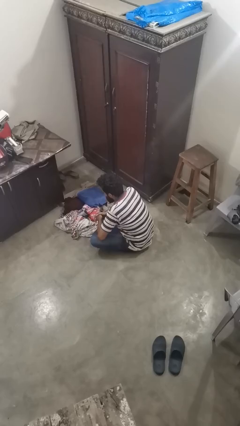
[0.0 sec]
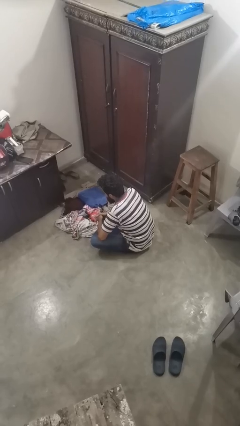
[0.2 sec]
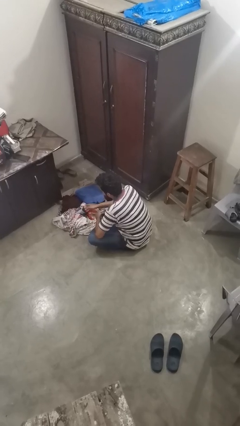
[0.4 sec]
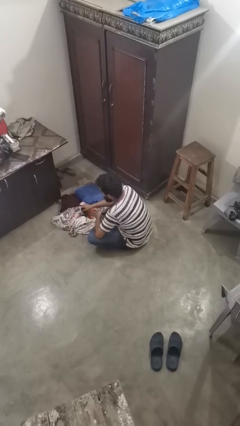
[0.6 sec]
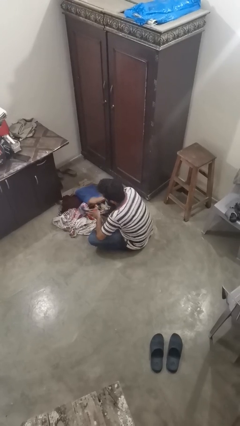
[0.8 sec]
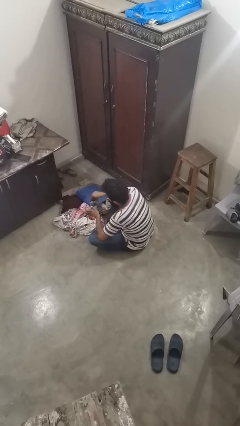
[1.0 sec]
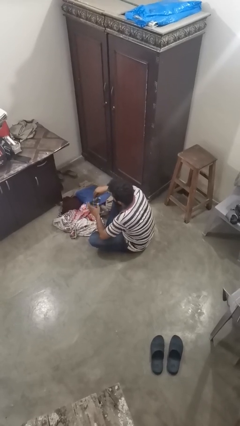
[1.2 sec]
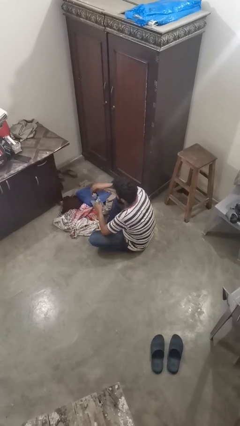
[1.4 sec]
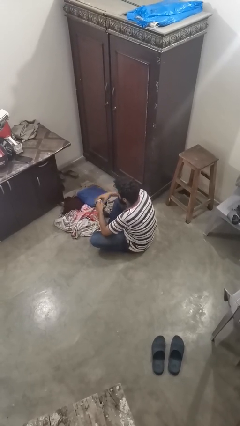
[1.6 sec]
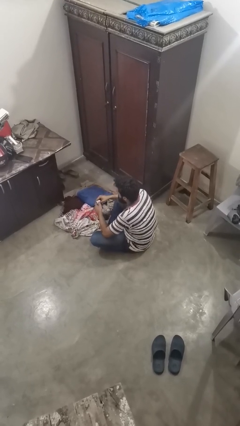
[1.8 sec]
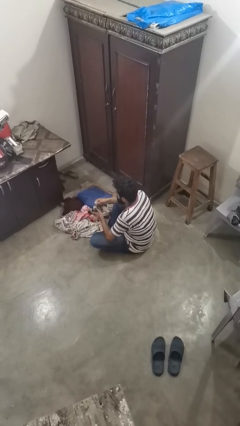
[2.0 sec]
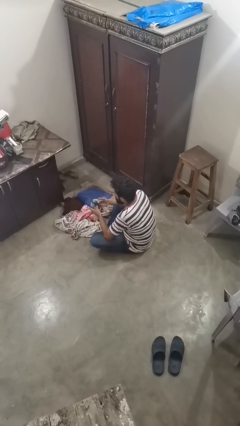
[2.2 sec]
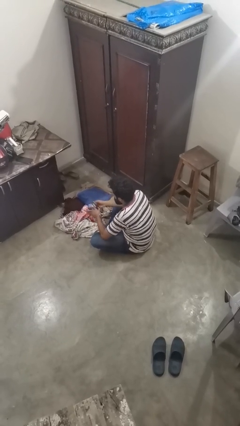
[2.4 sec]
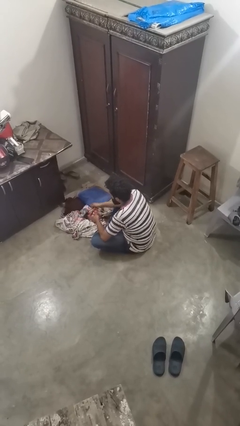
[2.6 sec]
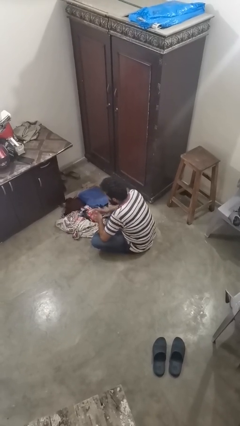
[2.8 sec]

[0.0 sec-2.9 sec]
person folds socks

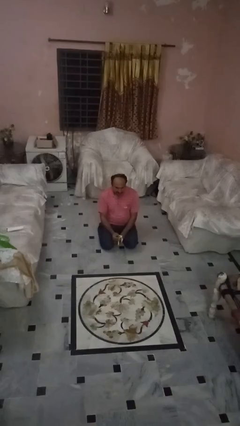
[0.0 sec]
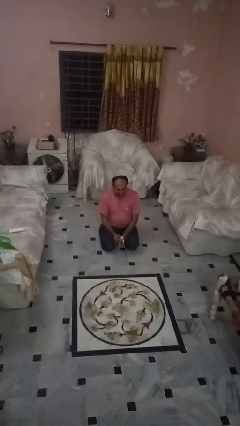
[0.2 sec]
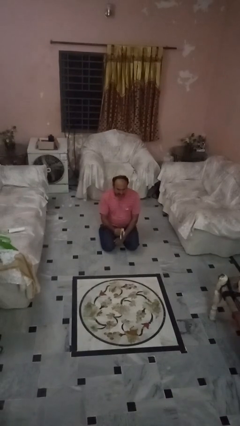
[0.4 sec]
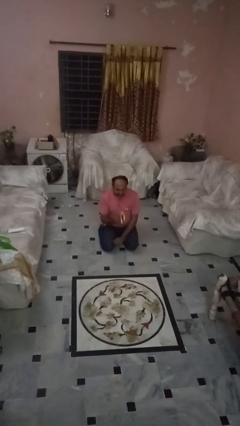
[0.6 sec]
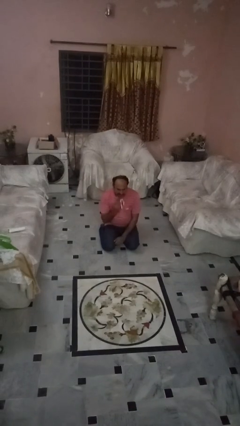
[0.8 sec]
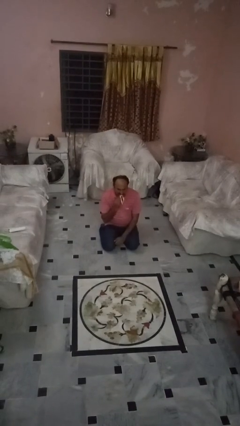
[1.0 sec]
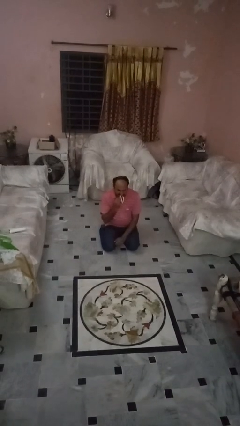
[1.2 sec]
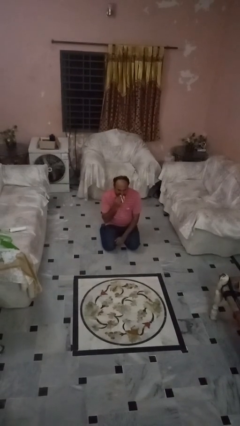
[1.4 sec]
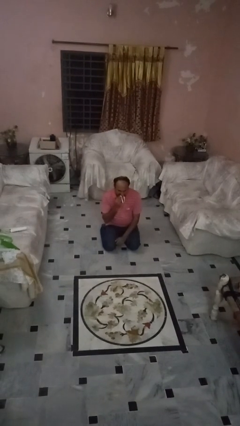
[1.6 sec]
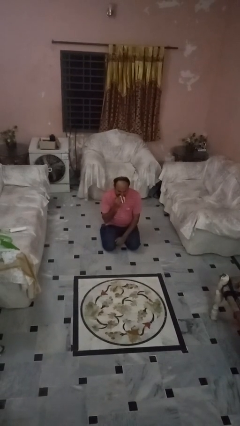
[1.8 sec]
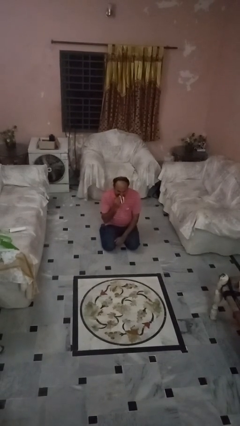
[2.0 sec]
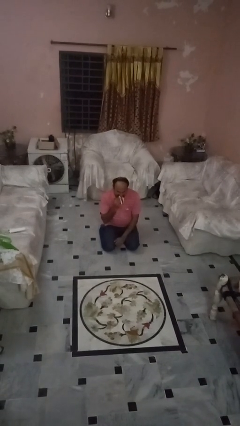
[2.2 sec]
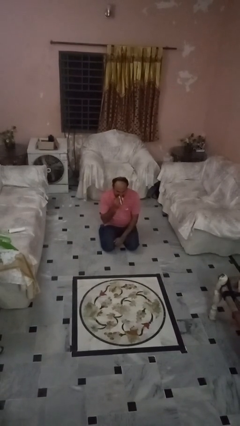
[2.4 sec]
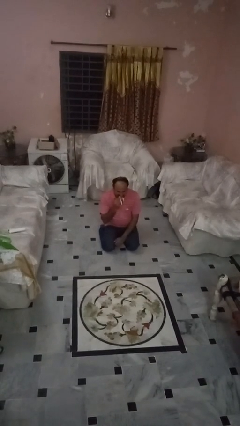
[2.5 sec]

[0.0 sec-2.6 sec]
person eats banana

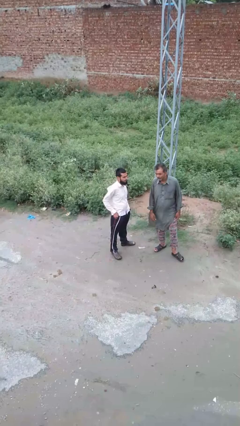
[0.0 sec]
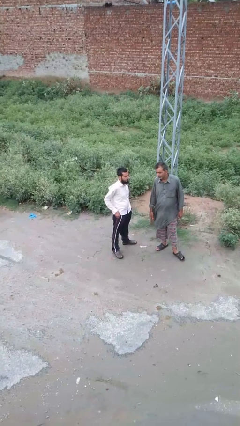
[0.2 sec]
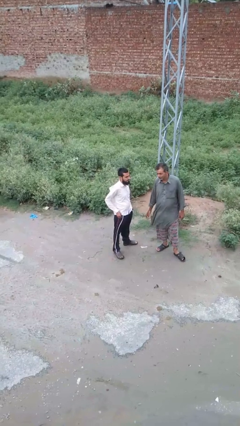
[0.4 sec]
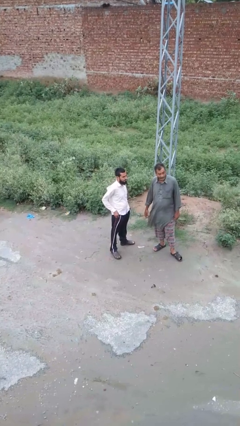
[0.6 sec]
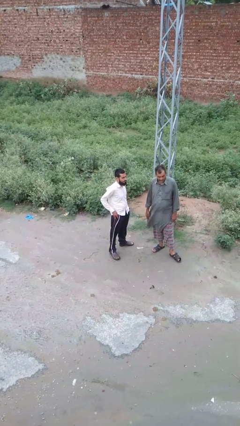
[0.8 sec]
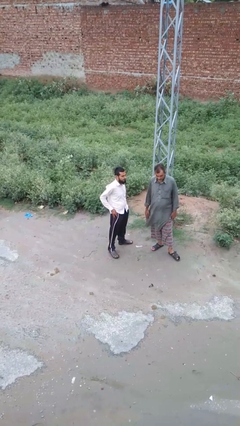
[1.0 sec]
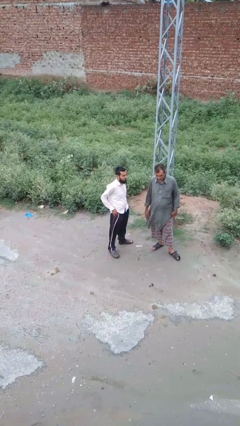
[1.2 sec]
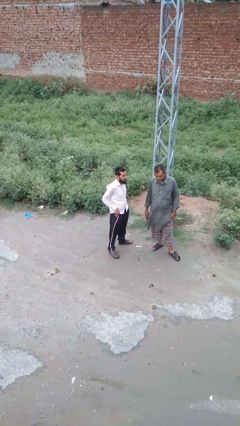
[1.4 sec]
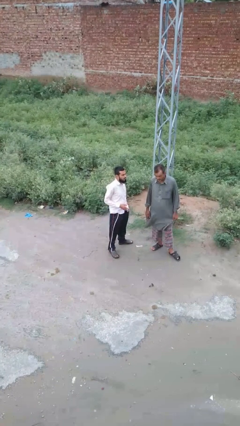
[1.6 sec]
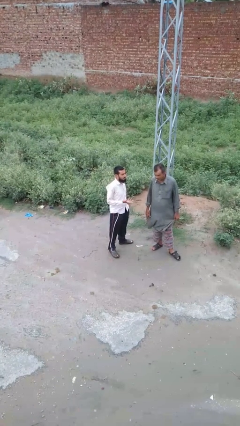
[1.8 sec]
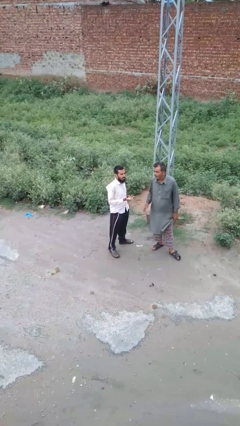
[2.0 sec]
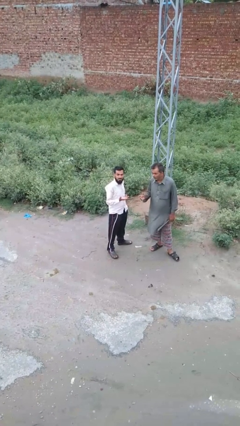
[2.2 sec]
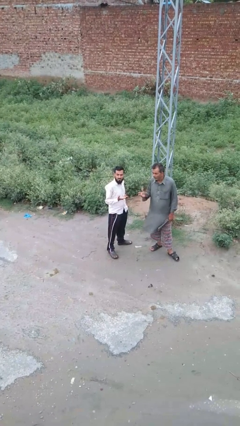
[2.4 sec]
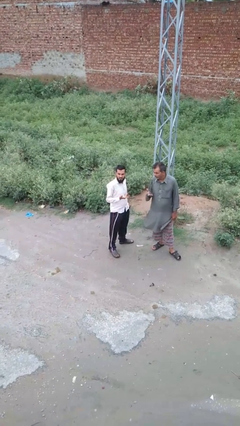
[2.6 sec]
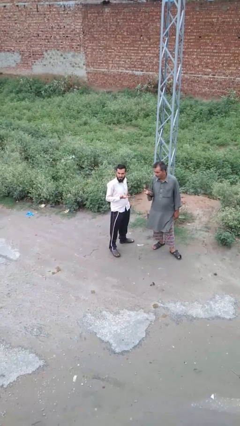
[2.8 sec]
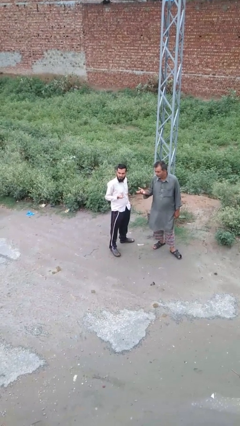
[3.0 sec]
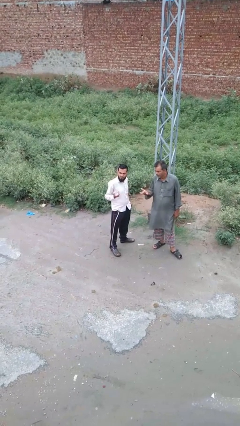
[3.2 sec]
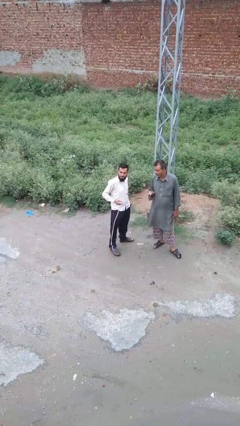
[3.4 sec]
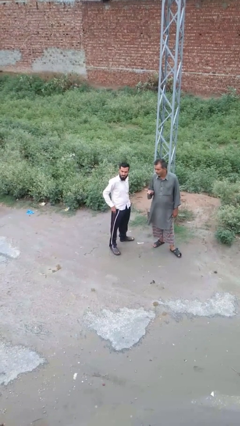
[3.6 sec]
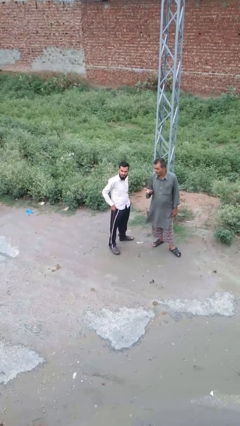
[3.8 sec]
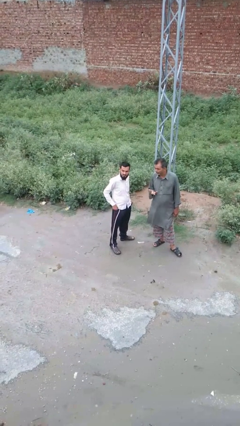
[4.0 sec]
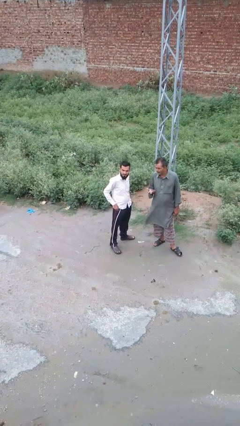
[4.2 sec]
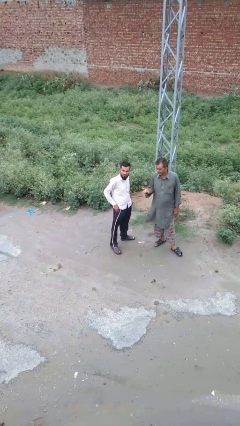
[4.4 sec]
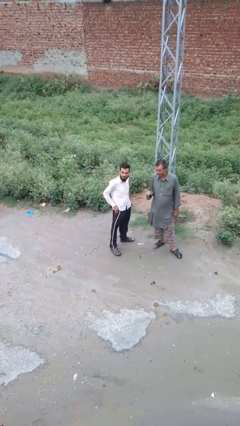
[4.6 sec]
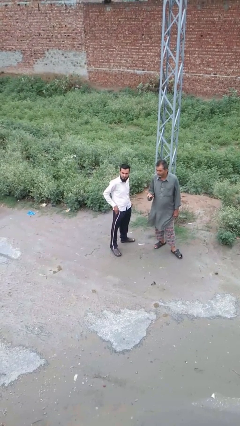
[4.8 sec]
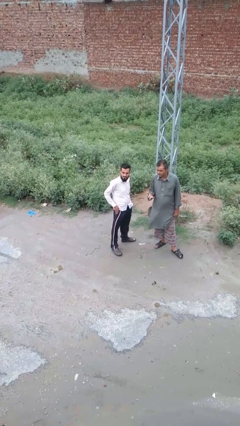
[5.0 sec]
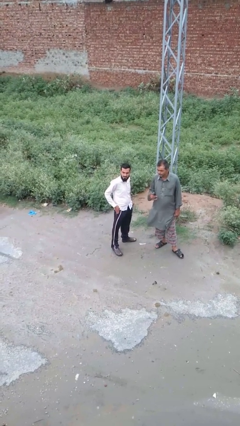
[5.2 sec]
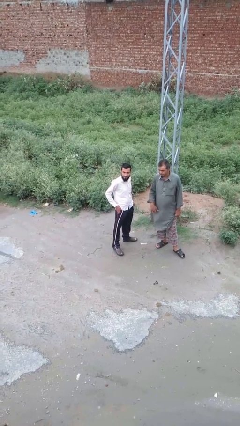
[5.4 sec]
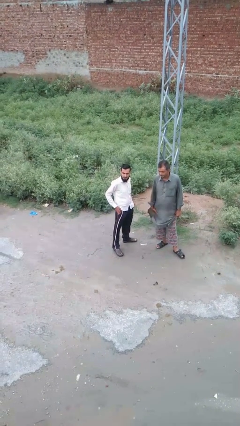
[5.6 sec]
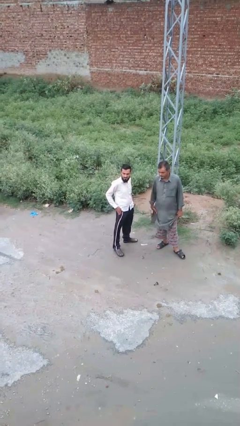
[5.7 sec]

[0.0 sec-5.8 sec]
person talks to person

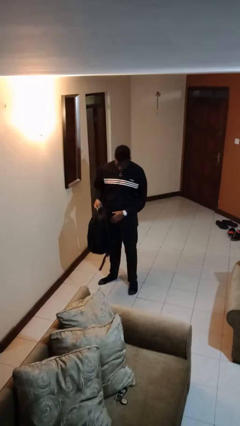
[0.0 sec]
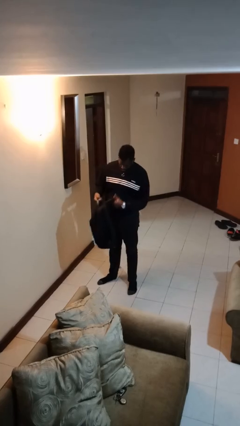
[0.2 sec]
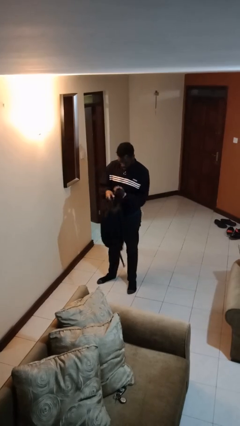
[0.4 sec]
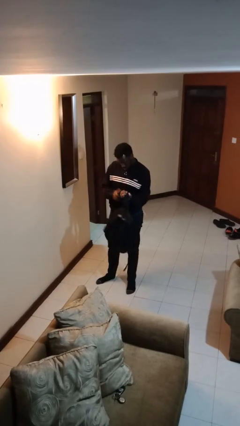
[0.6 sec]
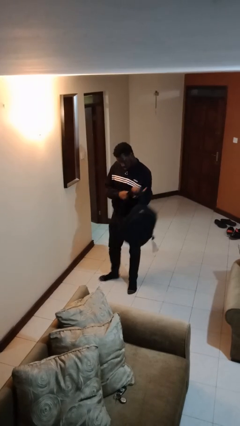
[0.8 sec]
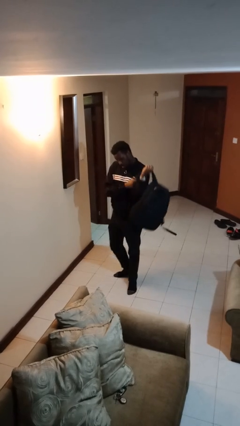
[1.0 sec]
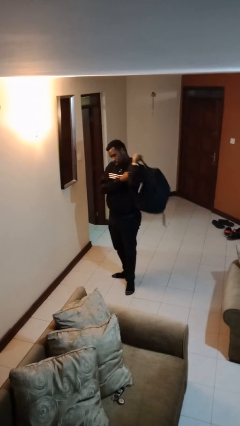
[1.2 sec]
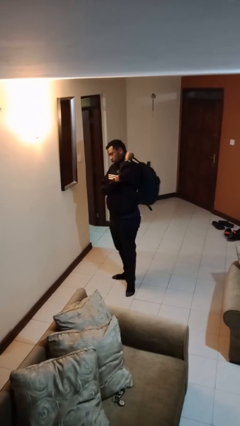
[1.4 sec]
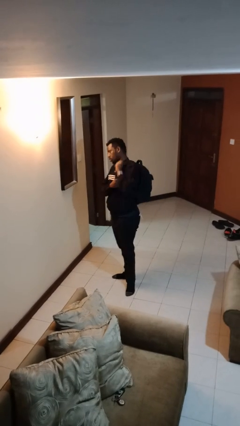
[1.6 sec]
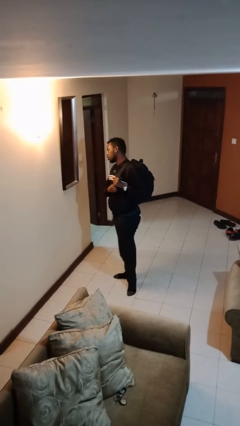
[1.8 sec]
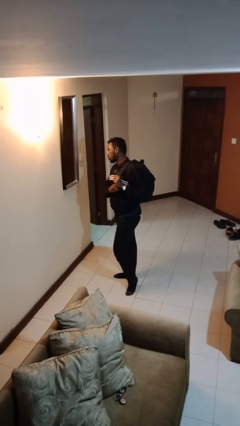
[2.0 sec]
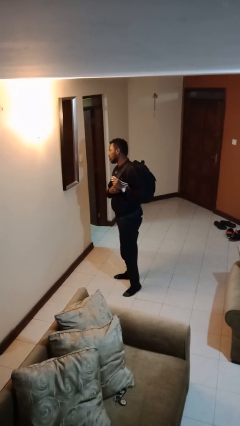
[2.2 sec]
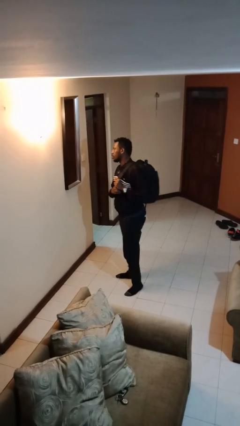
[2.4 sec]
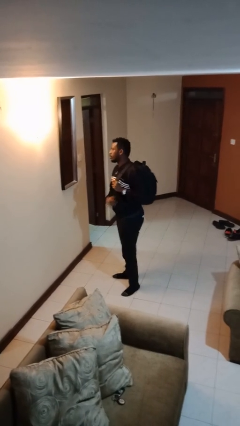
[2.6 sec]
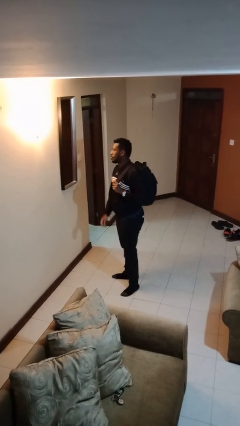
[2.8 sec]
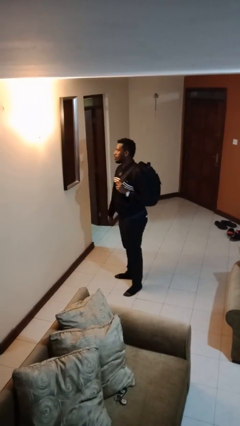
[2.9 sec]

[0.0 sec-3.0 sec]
person puts on backpack

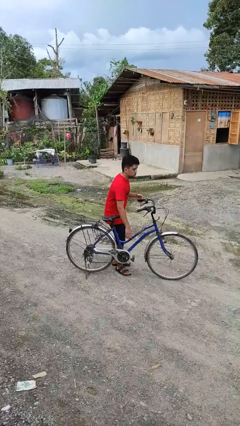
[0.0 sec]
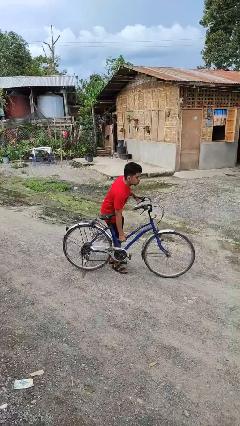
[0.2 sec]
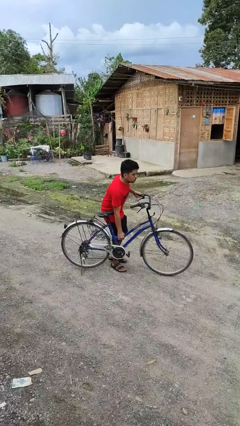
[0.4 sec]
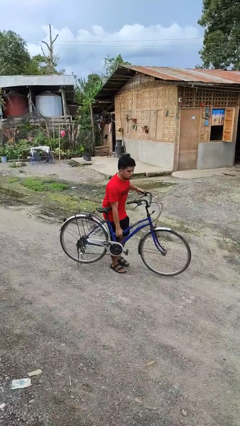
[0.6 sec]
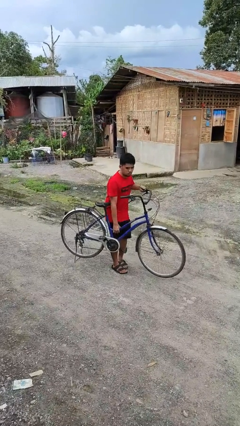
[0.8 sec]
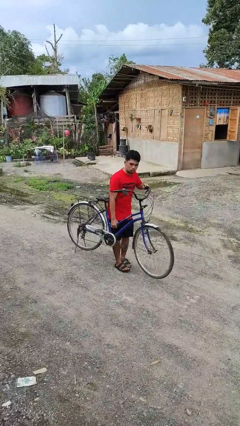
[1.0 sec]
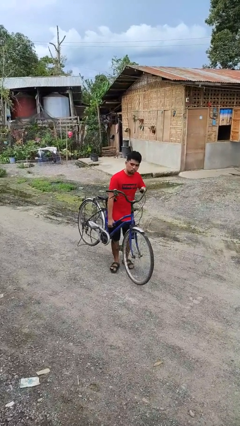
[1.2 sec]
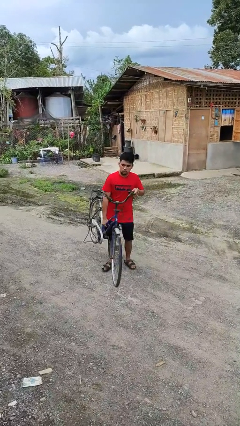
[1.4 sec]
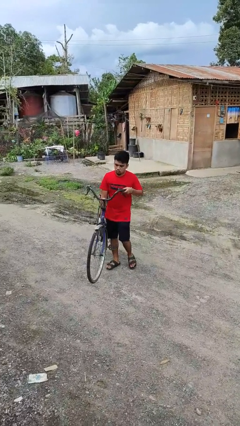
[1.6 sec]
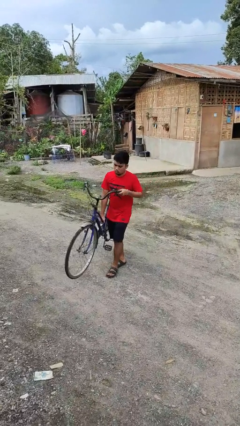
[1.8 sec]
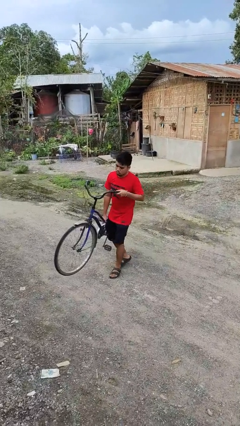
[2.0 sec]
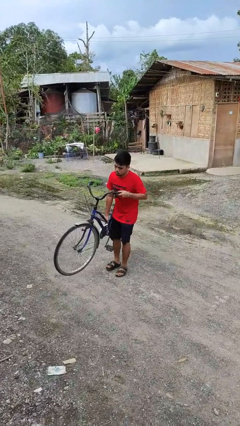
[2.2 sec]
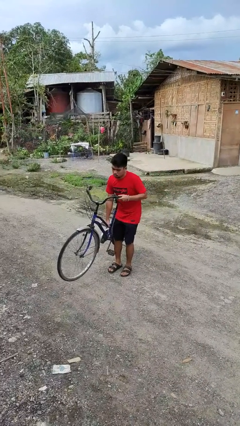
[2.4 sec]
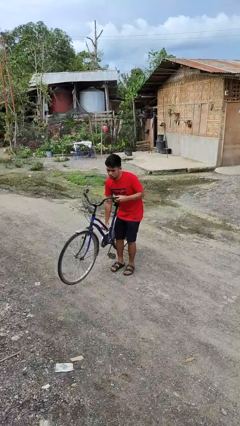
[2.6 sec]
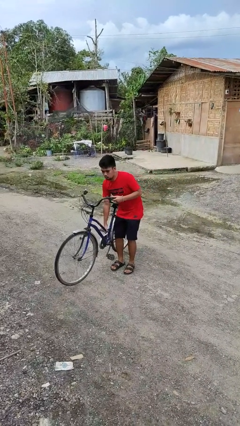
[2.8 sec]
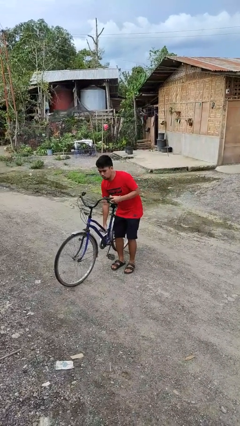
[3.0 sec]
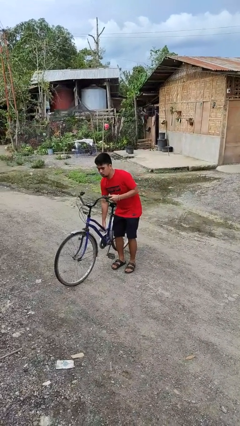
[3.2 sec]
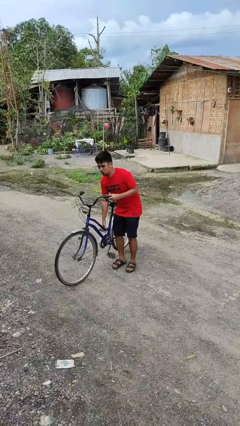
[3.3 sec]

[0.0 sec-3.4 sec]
person carries bicycle

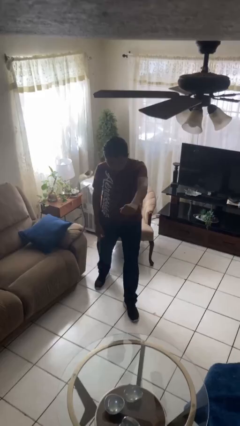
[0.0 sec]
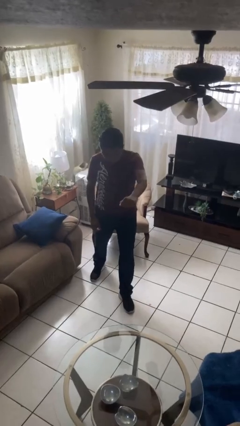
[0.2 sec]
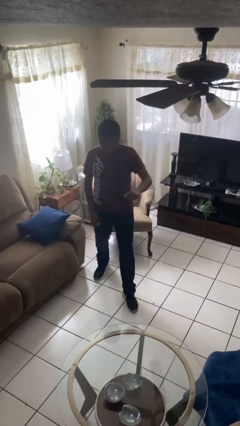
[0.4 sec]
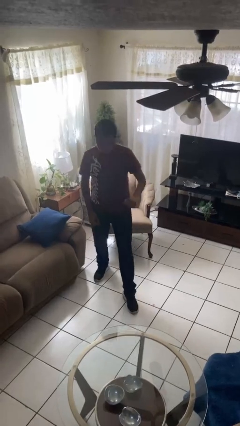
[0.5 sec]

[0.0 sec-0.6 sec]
person karate chop
